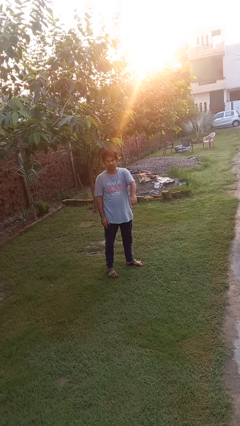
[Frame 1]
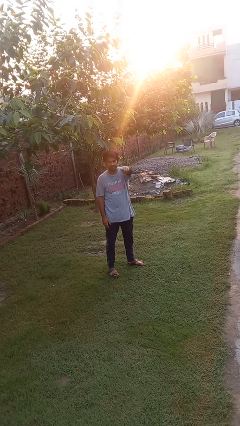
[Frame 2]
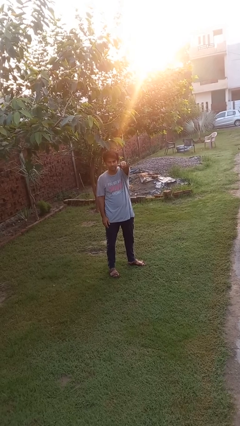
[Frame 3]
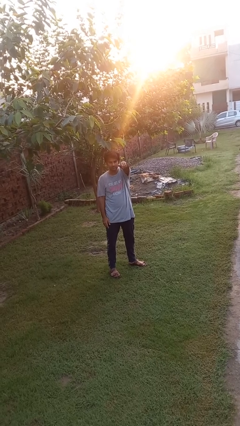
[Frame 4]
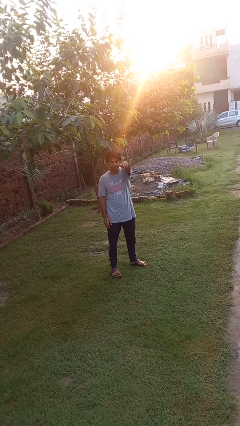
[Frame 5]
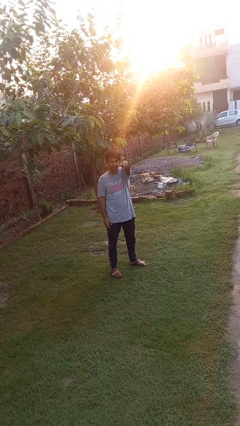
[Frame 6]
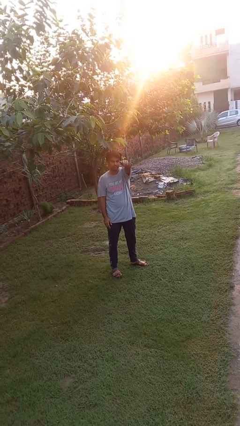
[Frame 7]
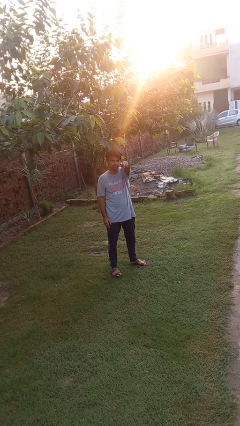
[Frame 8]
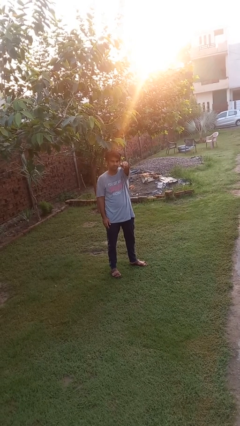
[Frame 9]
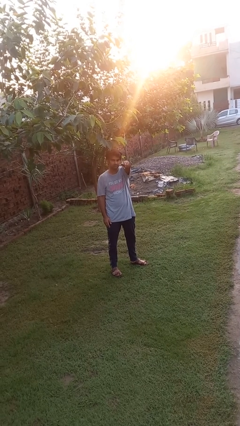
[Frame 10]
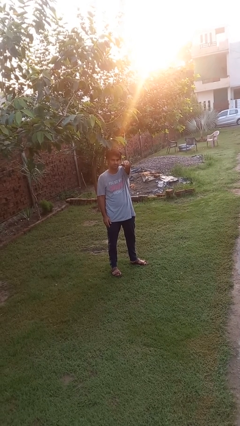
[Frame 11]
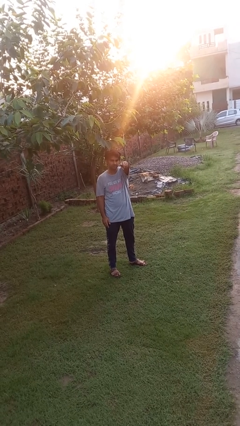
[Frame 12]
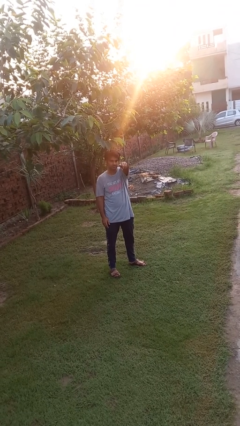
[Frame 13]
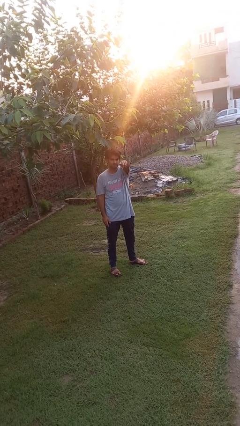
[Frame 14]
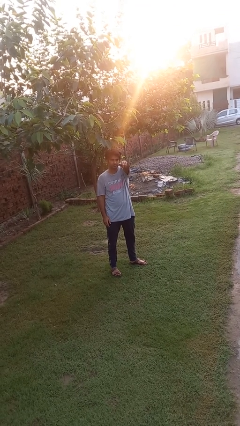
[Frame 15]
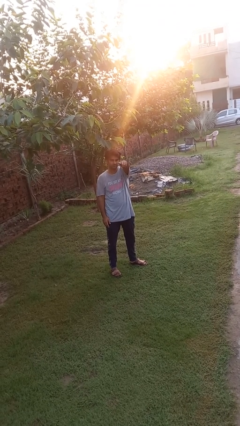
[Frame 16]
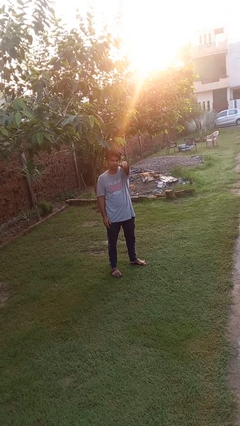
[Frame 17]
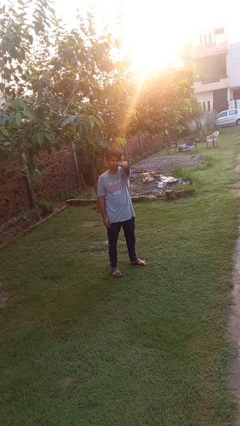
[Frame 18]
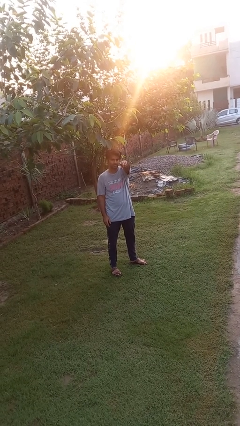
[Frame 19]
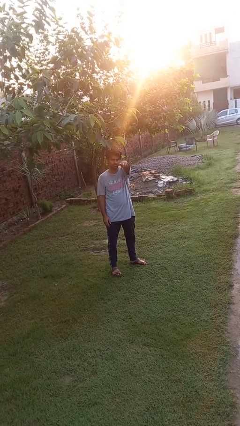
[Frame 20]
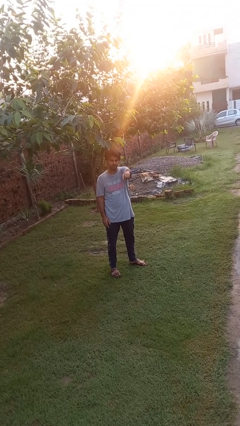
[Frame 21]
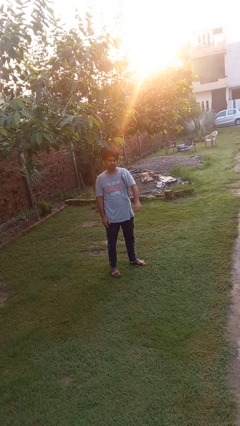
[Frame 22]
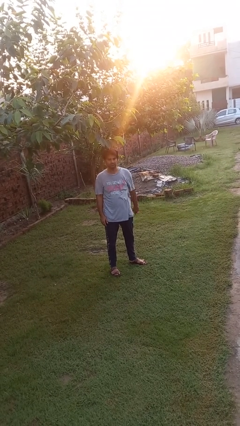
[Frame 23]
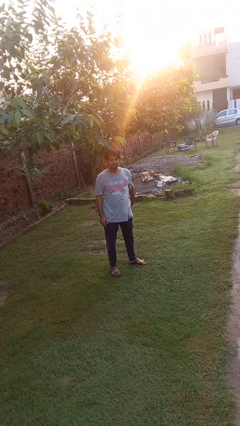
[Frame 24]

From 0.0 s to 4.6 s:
person points at person

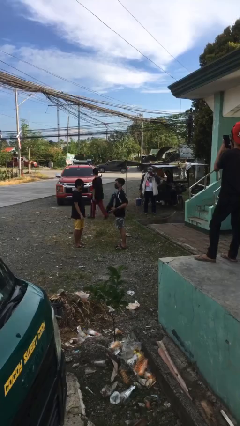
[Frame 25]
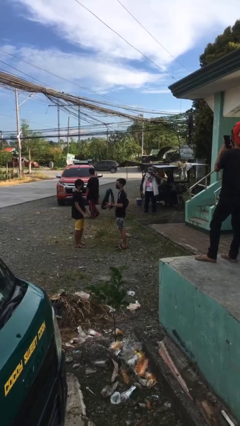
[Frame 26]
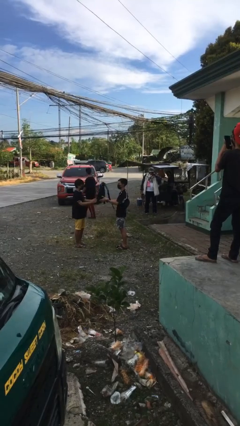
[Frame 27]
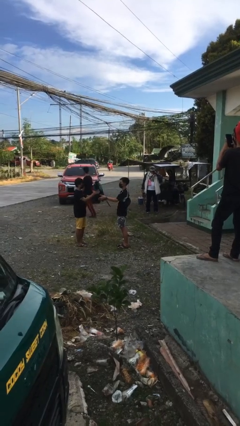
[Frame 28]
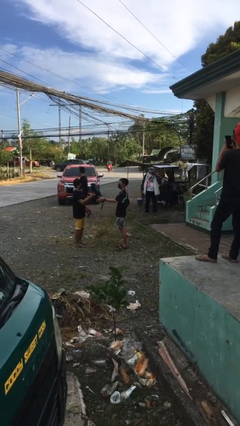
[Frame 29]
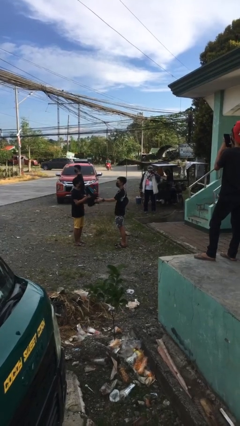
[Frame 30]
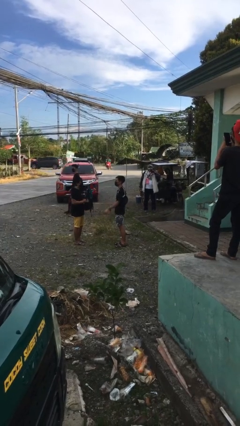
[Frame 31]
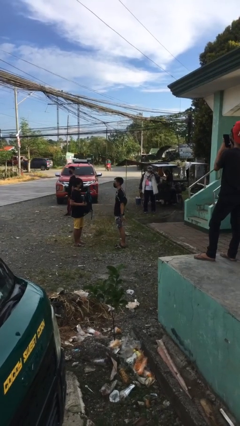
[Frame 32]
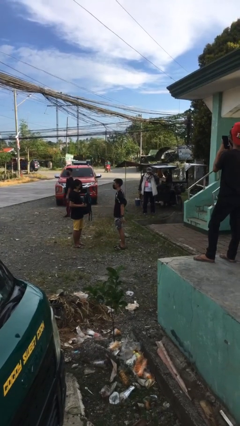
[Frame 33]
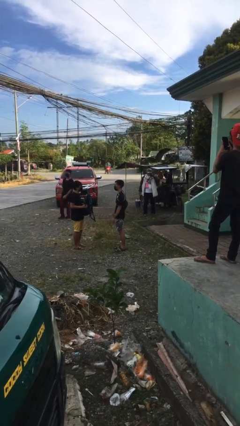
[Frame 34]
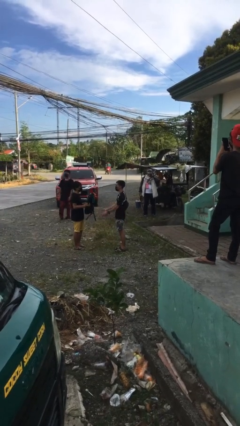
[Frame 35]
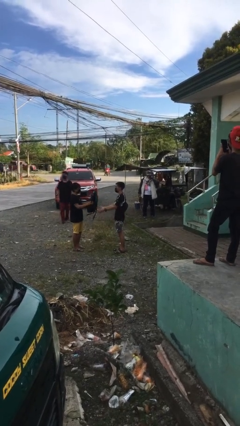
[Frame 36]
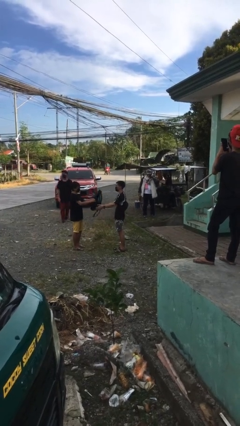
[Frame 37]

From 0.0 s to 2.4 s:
person transfers object to person

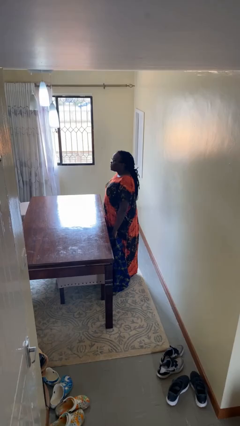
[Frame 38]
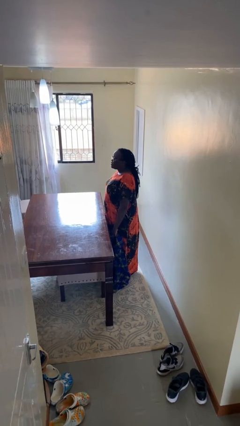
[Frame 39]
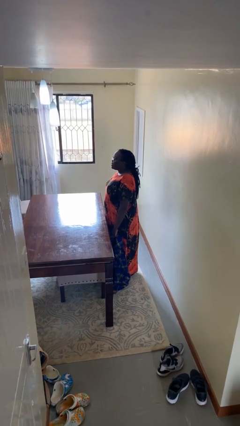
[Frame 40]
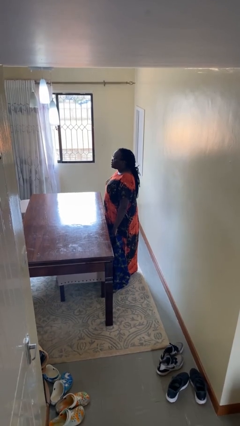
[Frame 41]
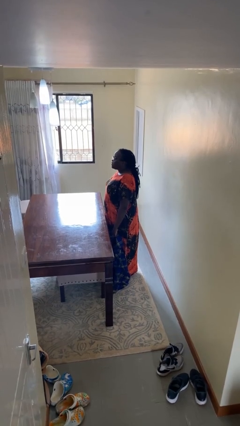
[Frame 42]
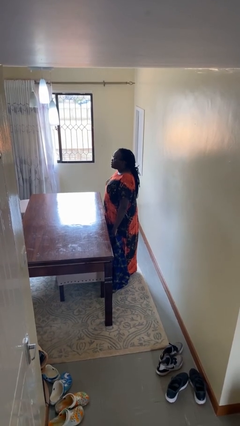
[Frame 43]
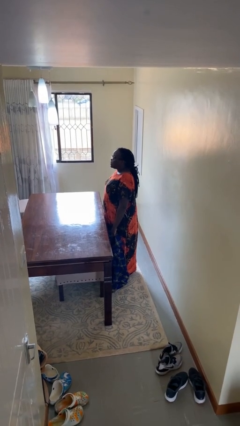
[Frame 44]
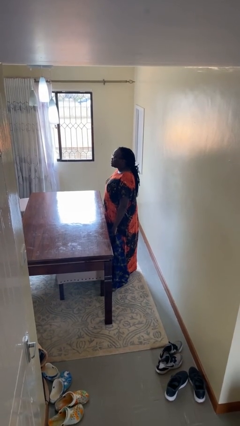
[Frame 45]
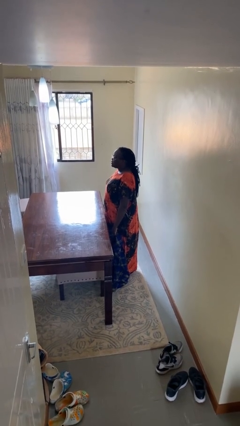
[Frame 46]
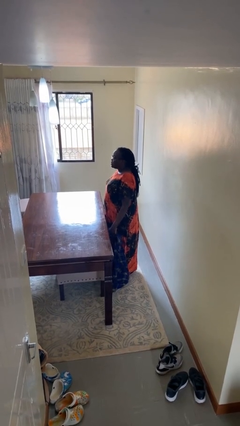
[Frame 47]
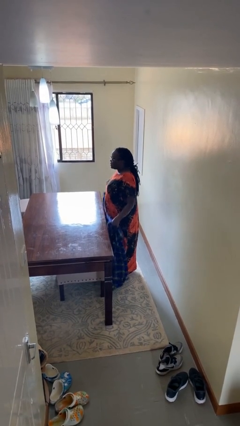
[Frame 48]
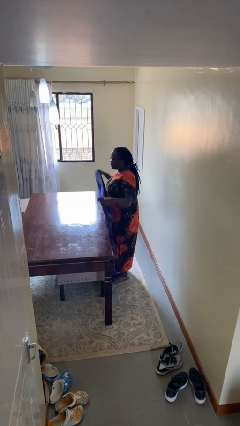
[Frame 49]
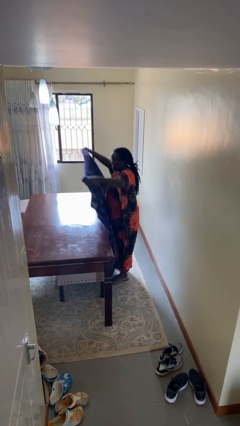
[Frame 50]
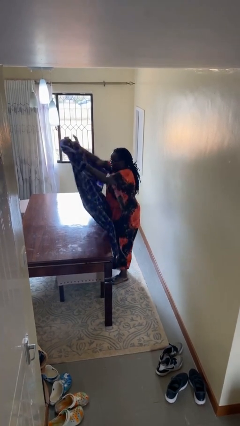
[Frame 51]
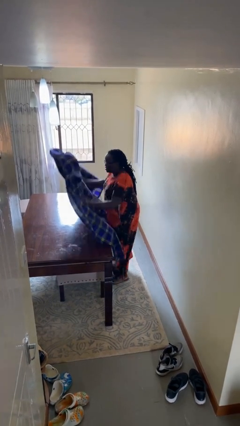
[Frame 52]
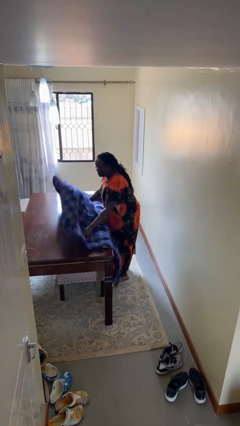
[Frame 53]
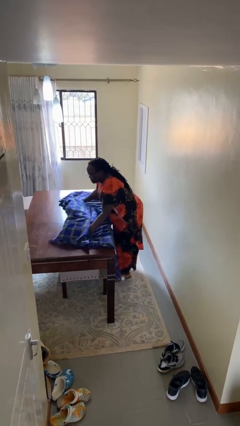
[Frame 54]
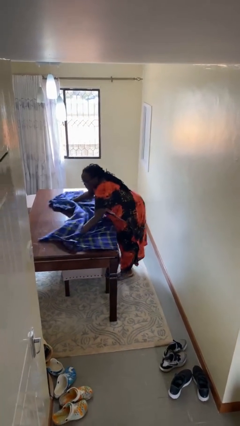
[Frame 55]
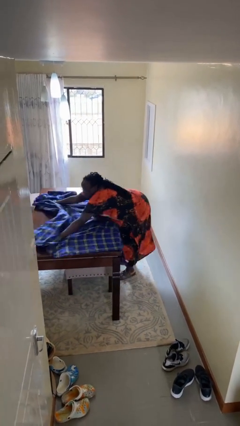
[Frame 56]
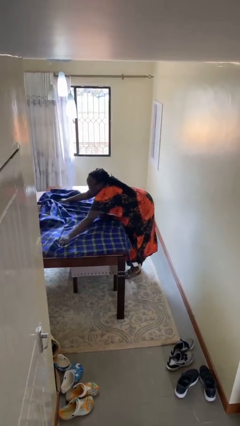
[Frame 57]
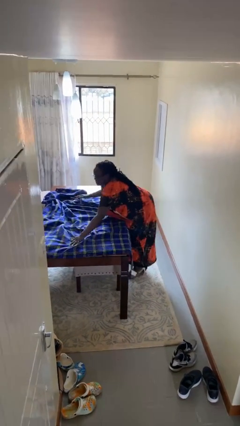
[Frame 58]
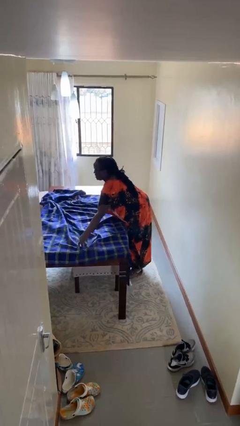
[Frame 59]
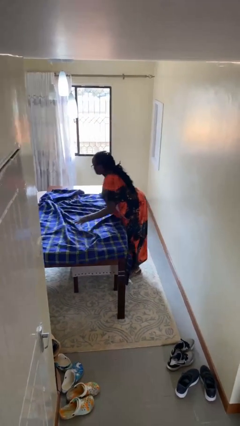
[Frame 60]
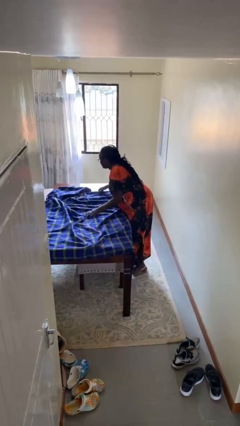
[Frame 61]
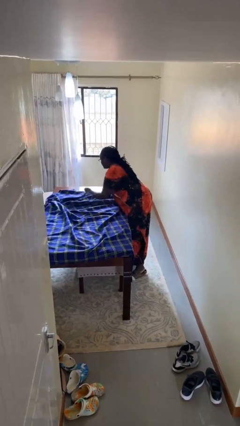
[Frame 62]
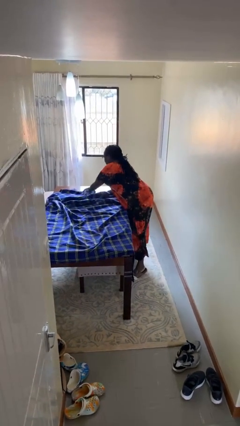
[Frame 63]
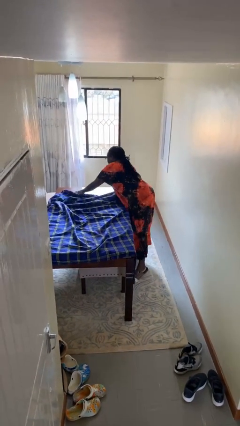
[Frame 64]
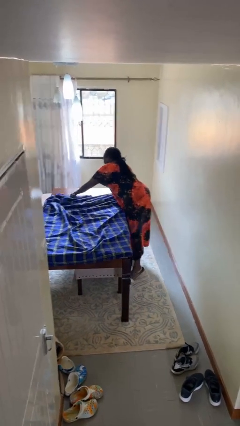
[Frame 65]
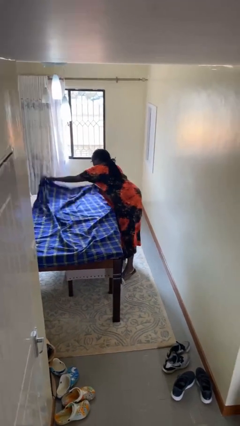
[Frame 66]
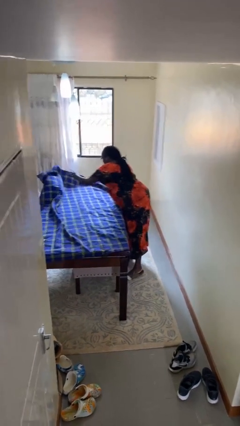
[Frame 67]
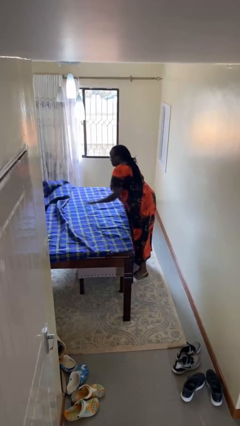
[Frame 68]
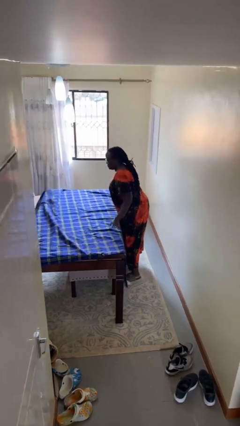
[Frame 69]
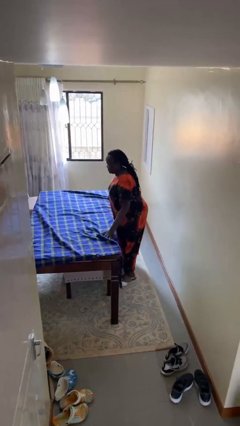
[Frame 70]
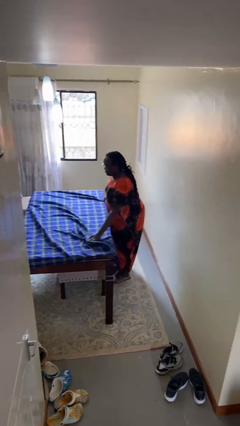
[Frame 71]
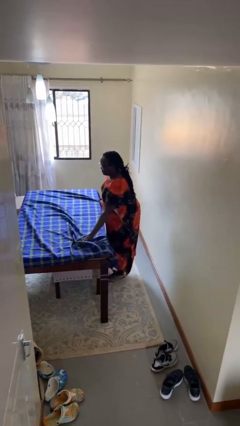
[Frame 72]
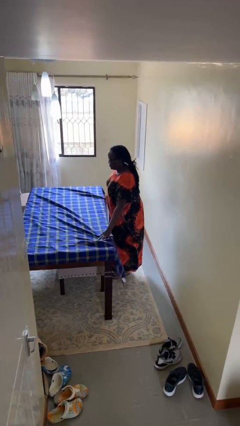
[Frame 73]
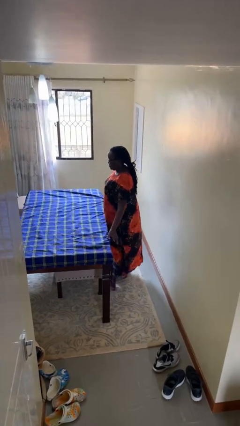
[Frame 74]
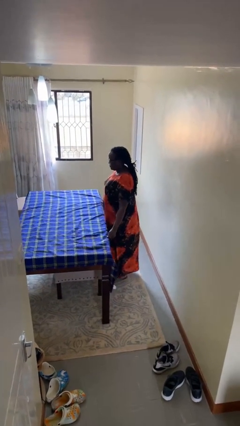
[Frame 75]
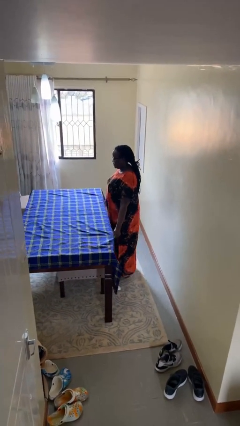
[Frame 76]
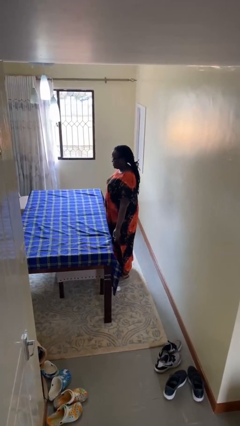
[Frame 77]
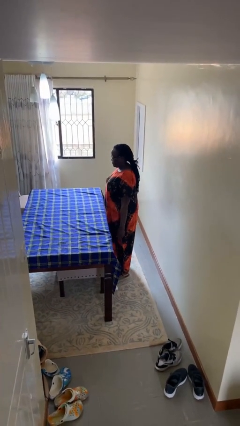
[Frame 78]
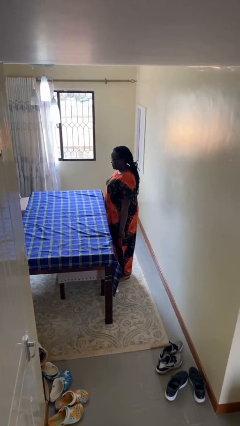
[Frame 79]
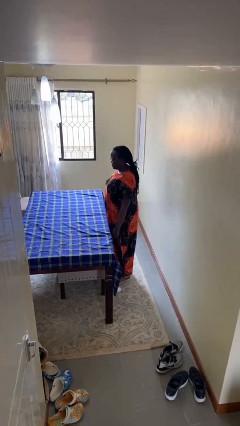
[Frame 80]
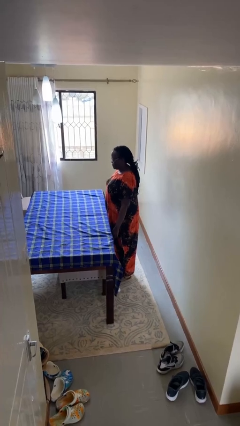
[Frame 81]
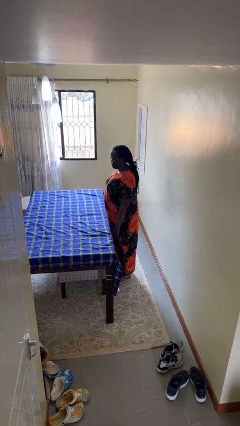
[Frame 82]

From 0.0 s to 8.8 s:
person spreads tablecloth

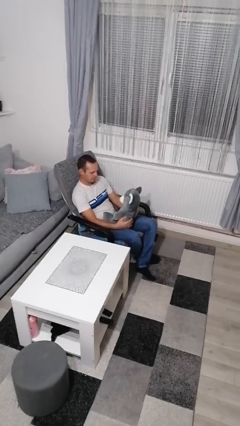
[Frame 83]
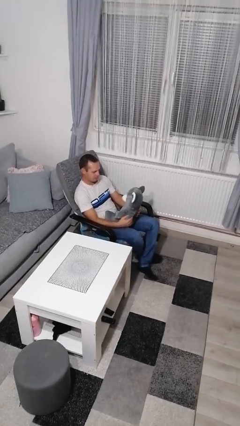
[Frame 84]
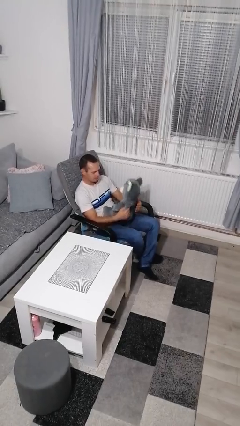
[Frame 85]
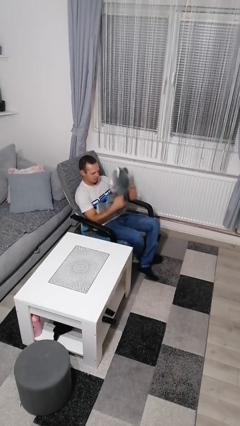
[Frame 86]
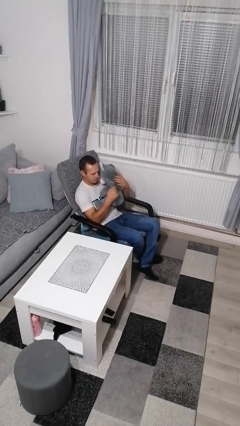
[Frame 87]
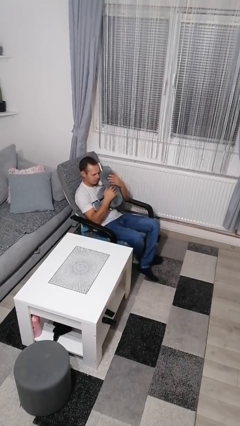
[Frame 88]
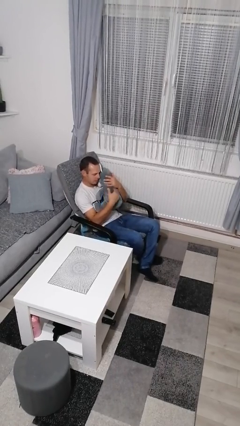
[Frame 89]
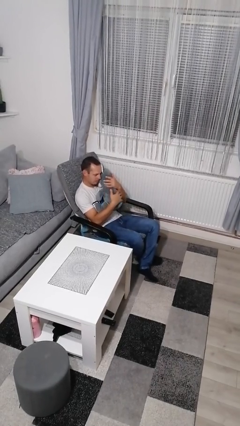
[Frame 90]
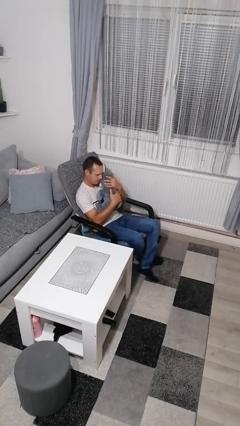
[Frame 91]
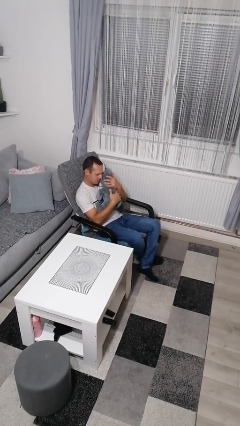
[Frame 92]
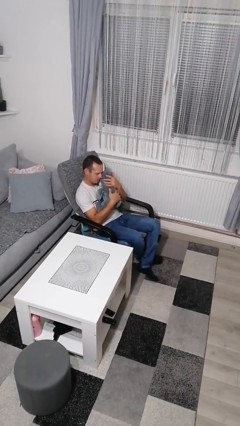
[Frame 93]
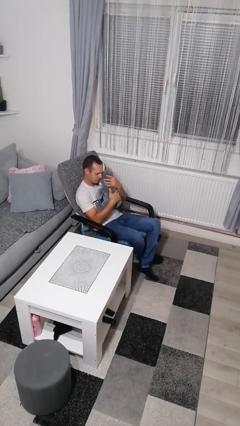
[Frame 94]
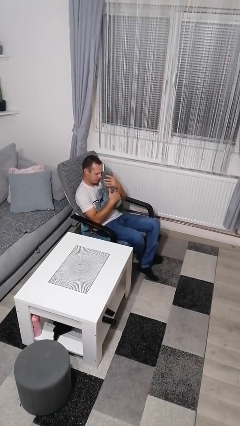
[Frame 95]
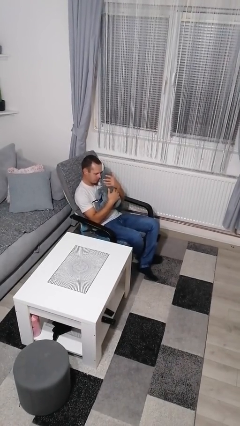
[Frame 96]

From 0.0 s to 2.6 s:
person hugs stuffed animal
